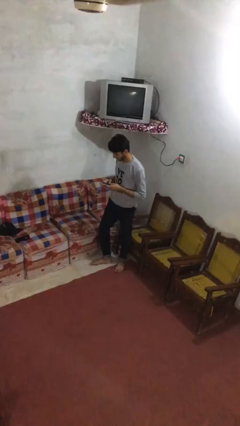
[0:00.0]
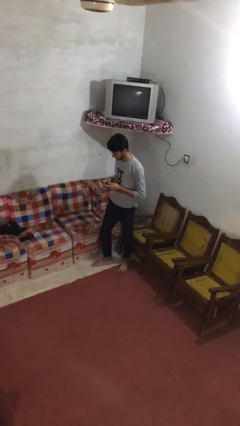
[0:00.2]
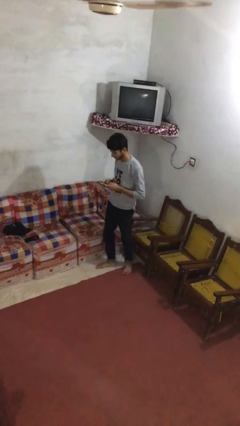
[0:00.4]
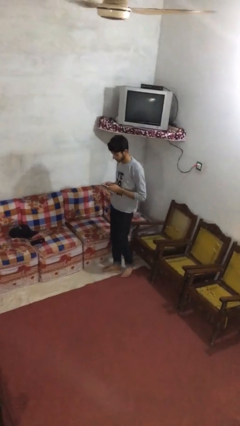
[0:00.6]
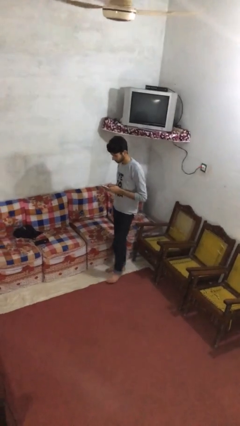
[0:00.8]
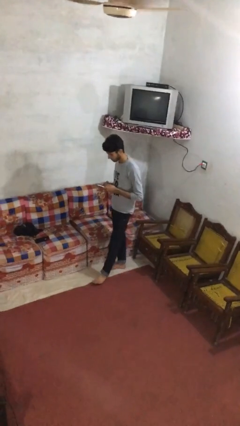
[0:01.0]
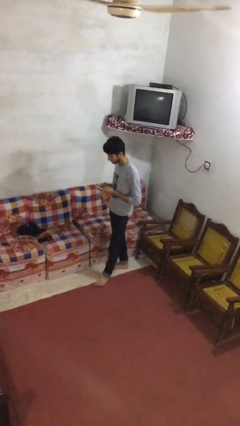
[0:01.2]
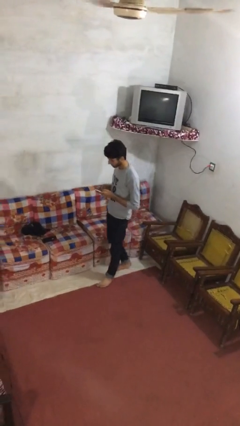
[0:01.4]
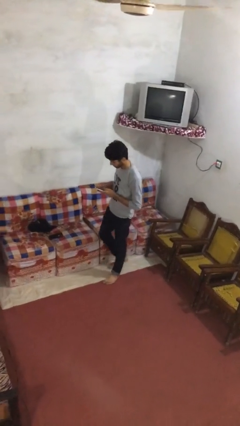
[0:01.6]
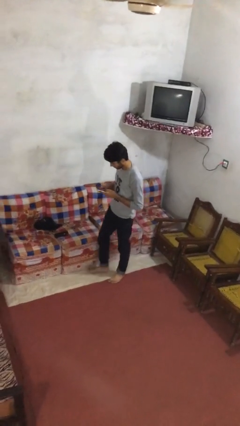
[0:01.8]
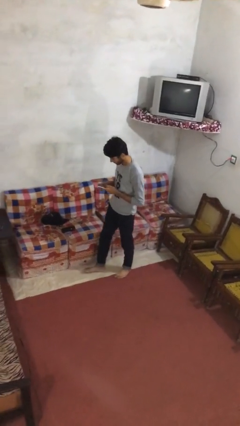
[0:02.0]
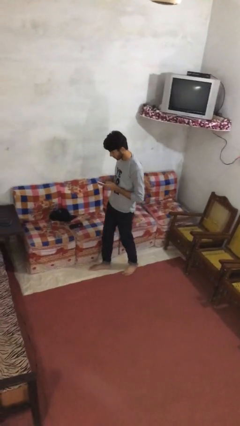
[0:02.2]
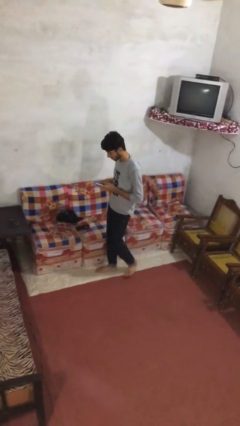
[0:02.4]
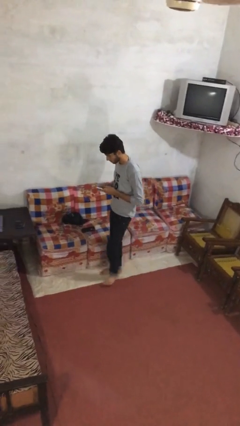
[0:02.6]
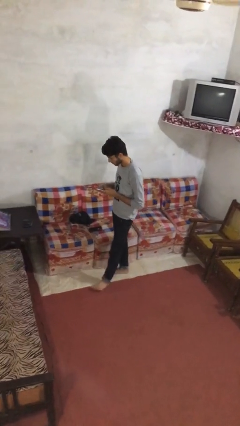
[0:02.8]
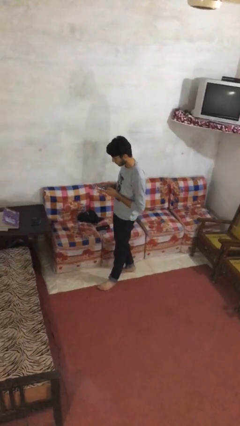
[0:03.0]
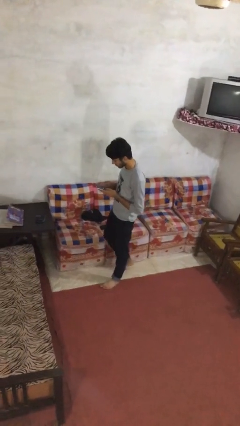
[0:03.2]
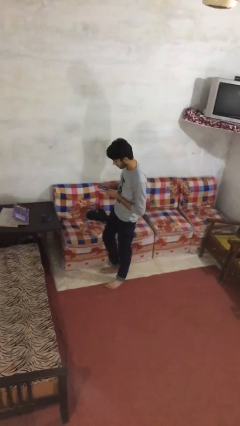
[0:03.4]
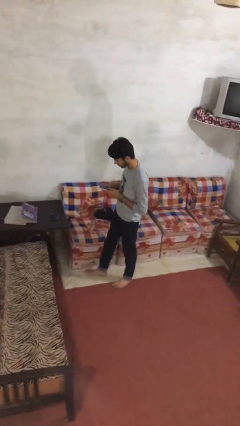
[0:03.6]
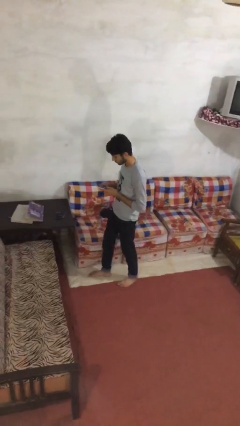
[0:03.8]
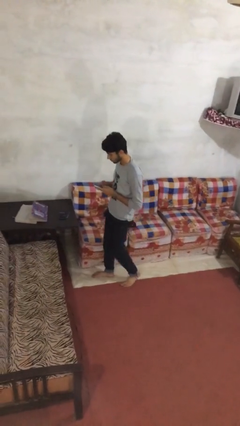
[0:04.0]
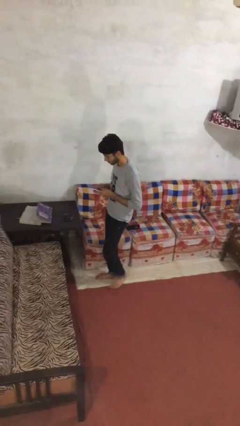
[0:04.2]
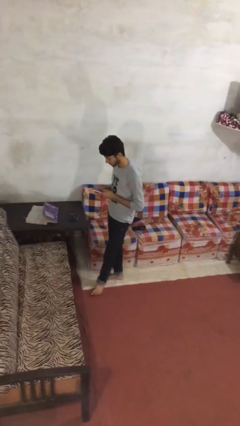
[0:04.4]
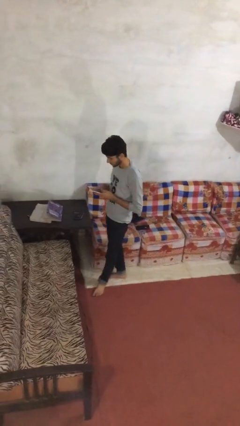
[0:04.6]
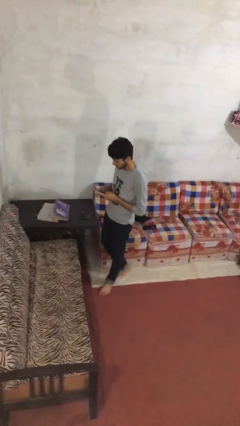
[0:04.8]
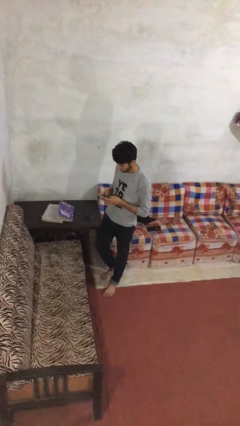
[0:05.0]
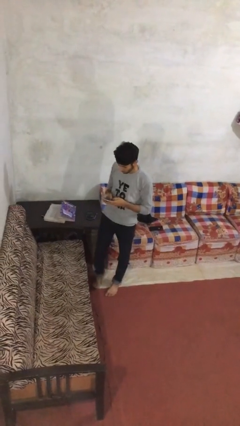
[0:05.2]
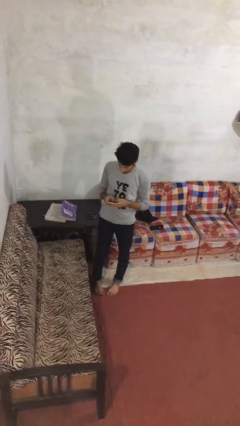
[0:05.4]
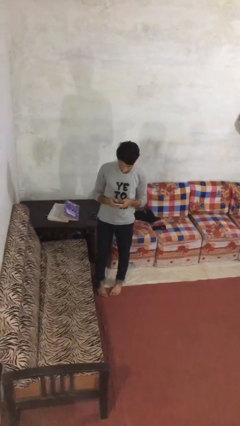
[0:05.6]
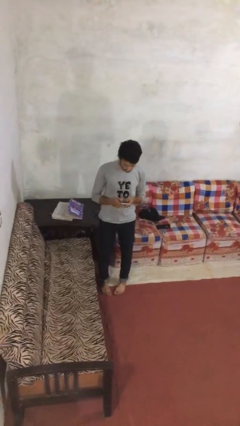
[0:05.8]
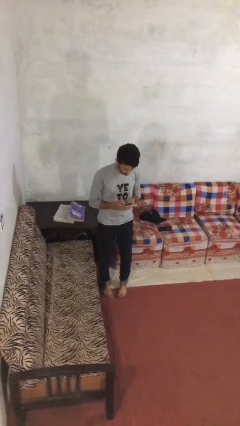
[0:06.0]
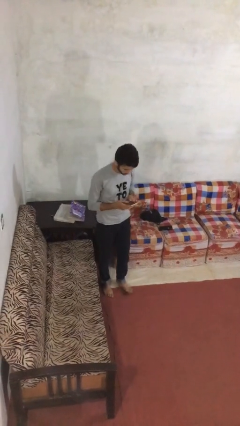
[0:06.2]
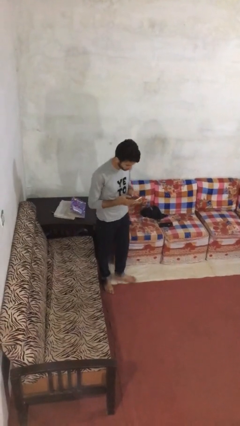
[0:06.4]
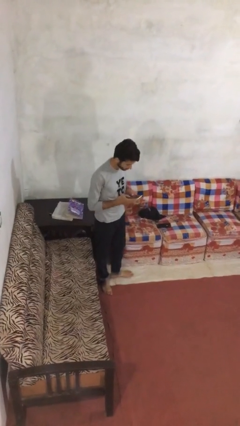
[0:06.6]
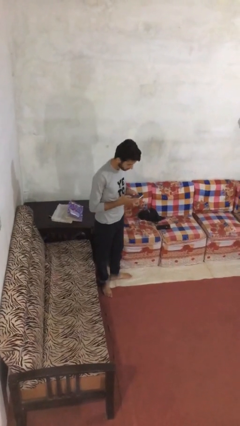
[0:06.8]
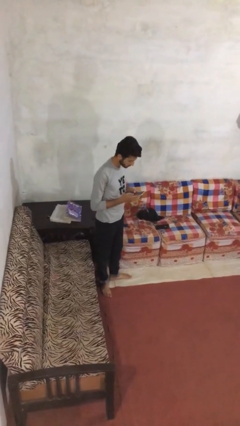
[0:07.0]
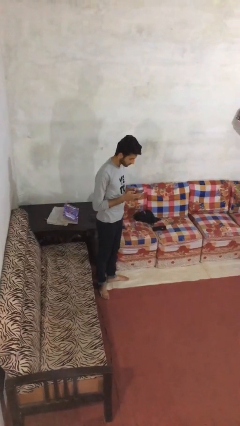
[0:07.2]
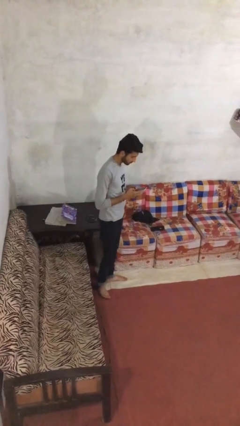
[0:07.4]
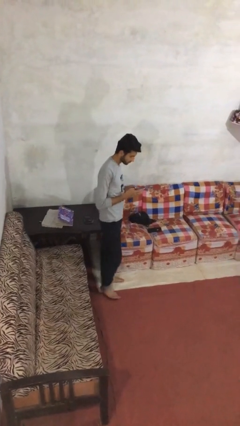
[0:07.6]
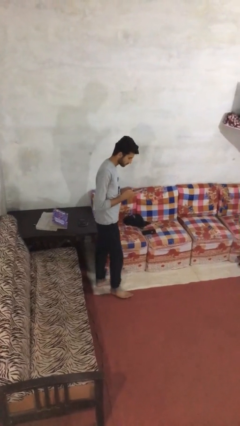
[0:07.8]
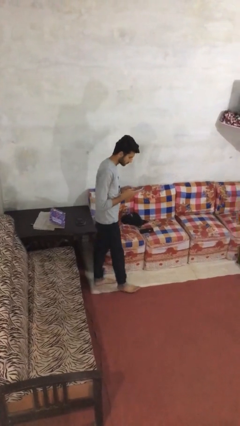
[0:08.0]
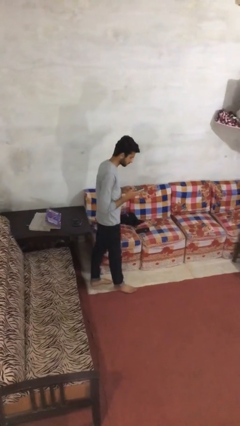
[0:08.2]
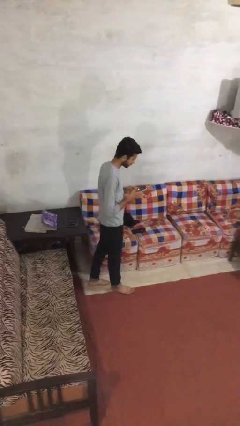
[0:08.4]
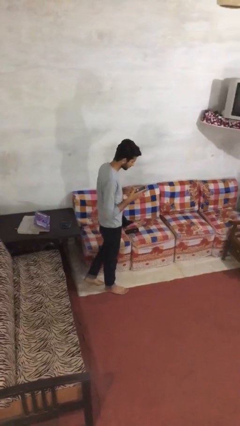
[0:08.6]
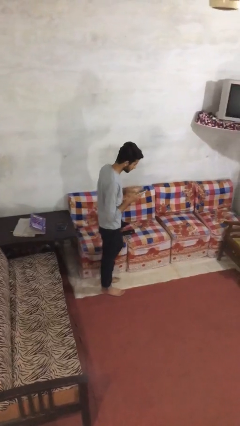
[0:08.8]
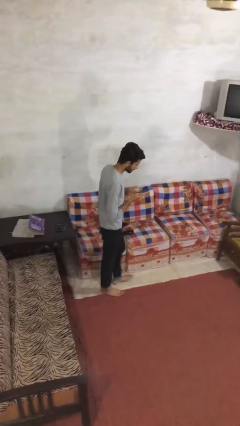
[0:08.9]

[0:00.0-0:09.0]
person texts on phone

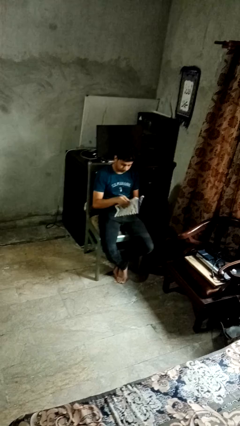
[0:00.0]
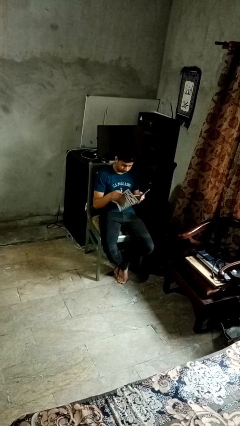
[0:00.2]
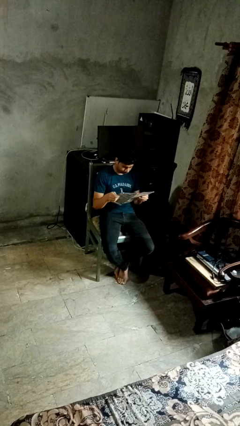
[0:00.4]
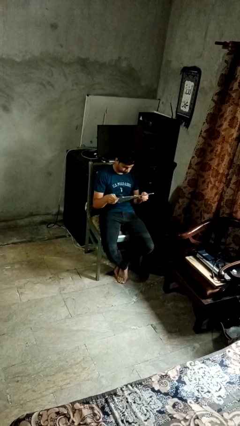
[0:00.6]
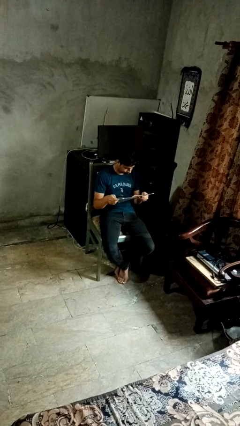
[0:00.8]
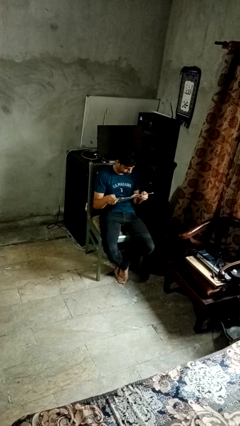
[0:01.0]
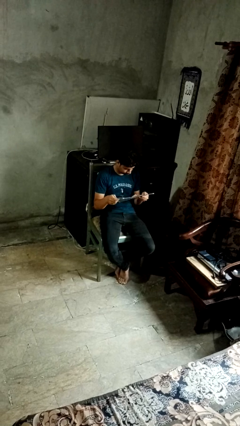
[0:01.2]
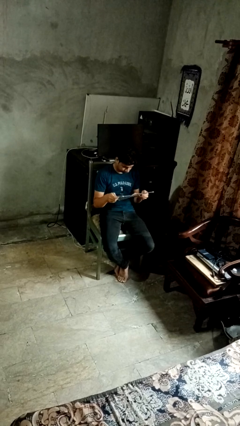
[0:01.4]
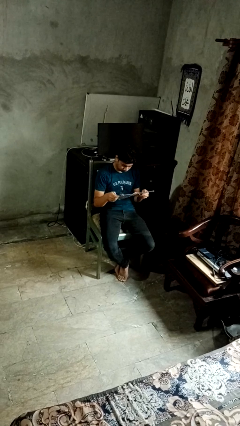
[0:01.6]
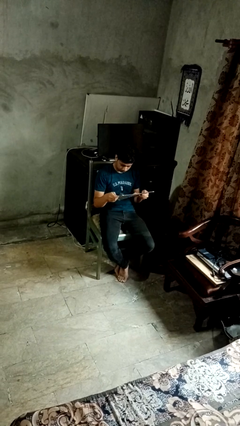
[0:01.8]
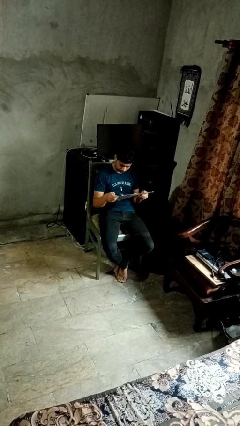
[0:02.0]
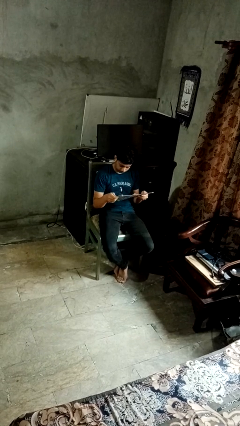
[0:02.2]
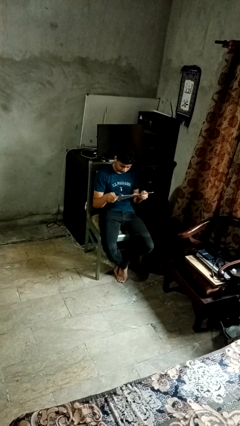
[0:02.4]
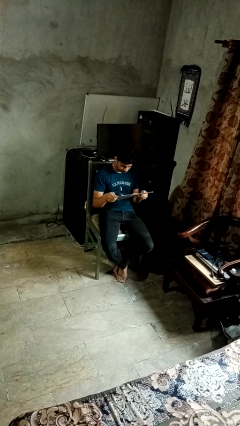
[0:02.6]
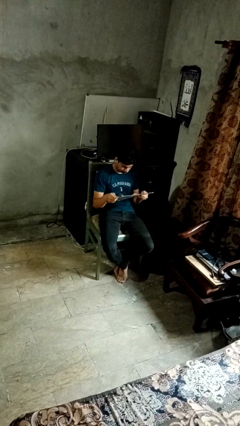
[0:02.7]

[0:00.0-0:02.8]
person reads magazine

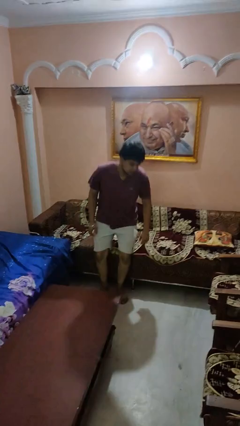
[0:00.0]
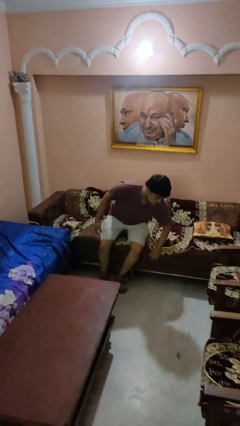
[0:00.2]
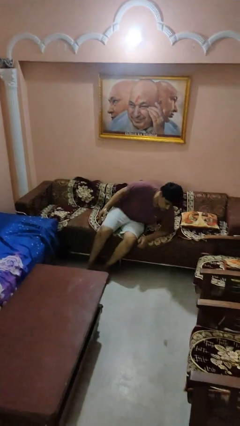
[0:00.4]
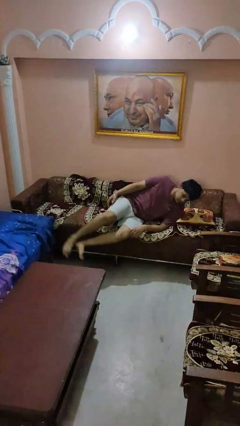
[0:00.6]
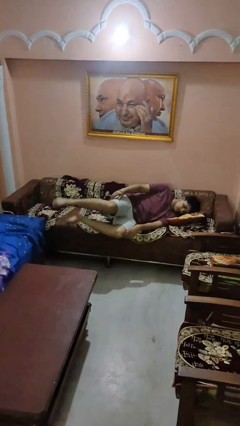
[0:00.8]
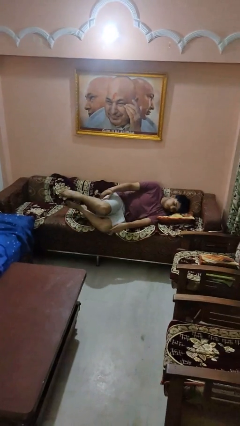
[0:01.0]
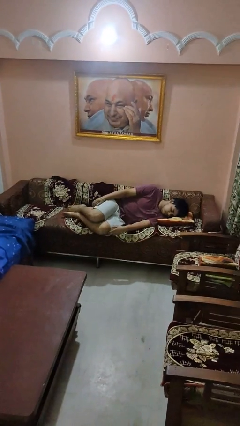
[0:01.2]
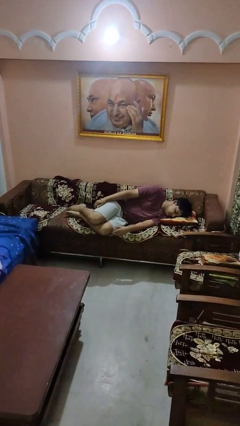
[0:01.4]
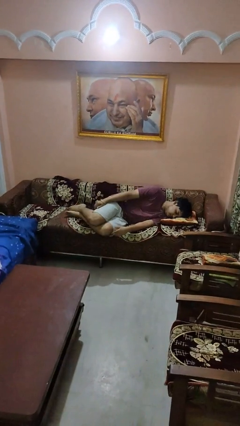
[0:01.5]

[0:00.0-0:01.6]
person lies down on couch

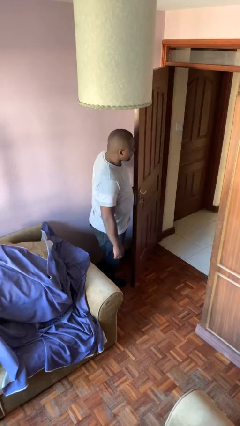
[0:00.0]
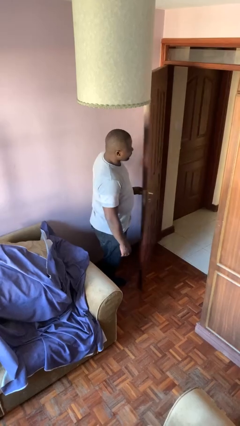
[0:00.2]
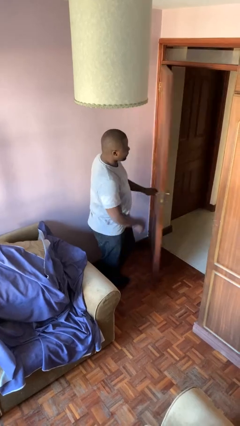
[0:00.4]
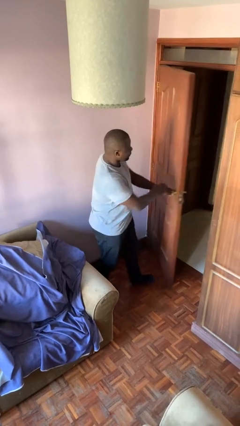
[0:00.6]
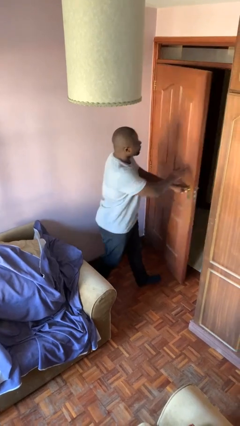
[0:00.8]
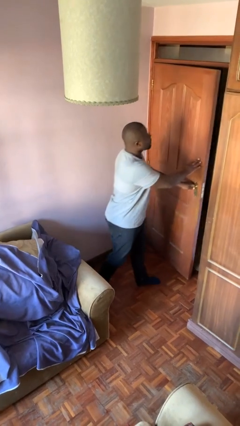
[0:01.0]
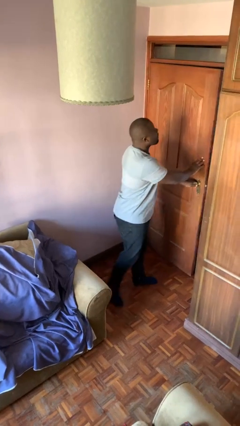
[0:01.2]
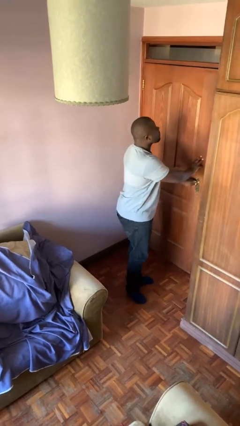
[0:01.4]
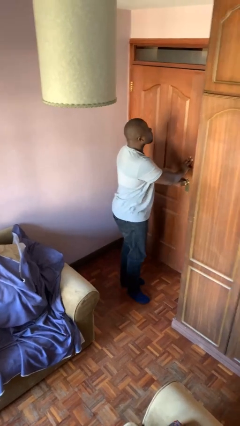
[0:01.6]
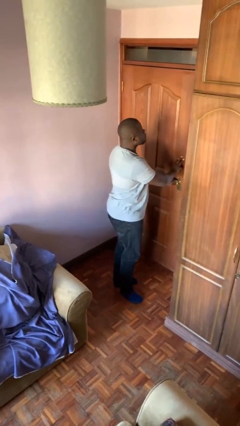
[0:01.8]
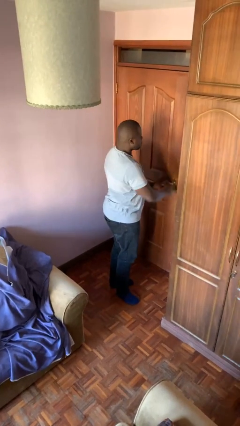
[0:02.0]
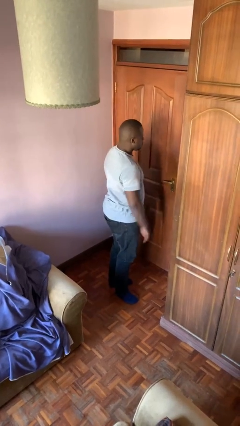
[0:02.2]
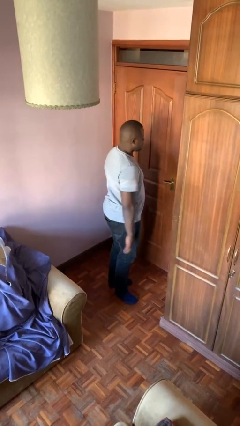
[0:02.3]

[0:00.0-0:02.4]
person closes facility door

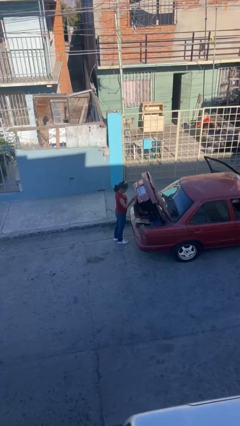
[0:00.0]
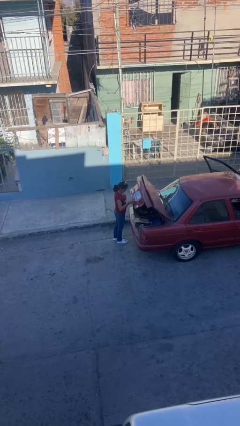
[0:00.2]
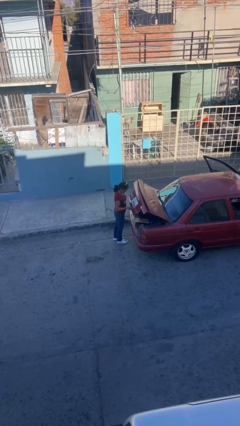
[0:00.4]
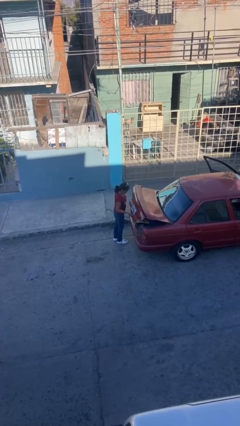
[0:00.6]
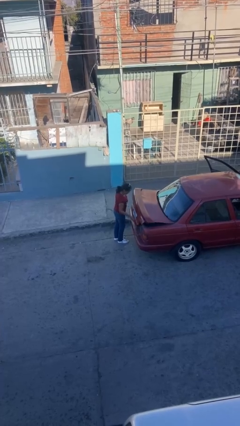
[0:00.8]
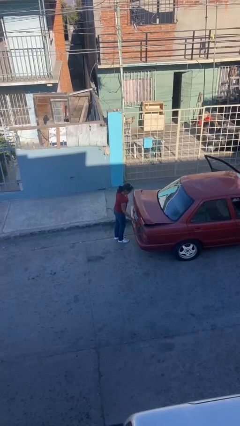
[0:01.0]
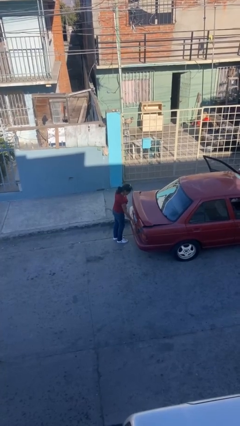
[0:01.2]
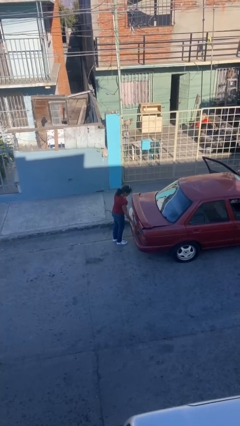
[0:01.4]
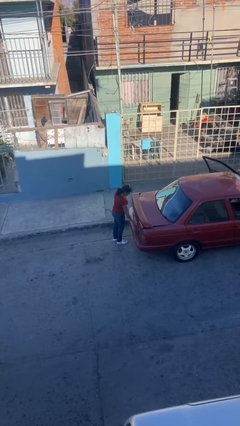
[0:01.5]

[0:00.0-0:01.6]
person closes car trunk
